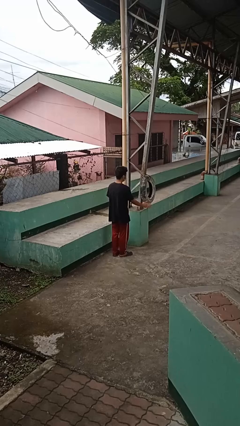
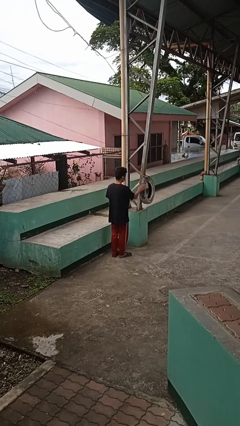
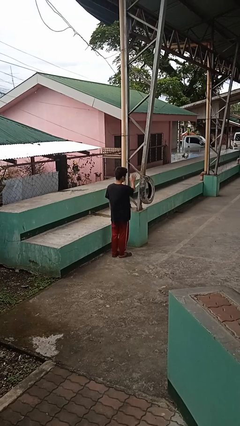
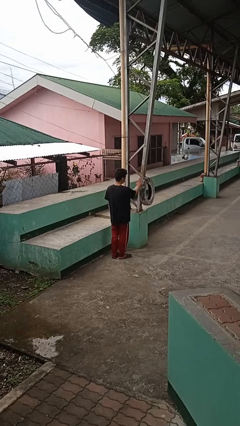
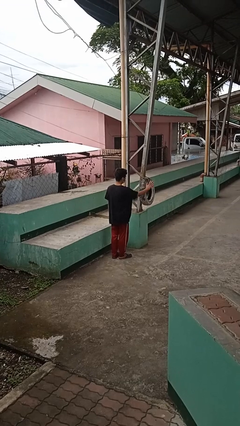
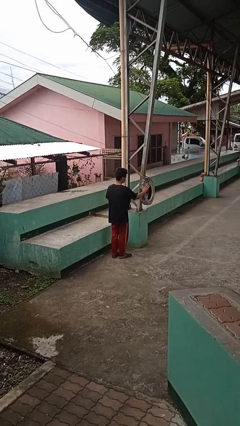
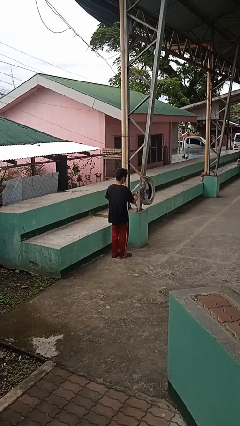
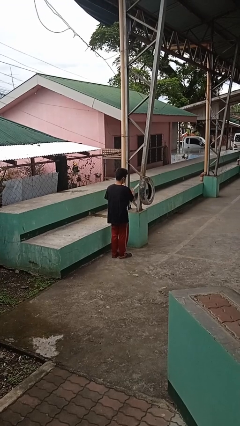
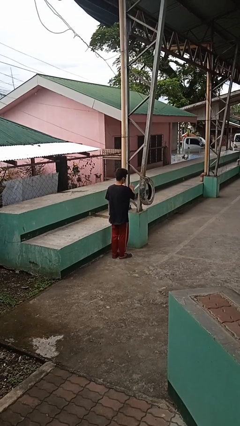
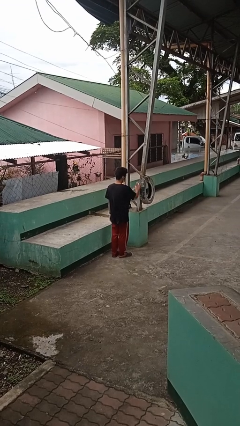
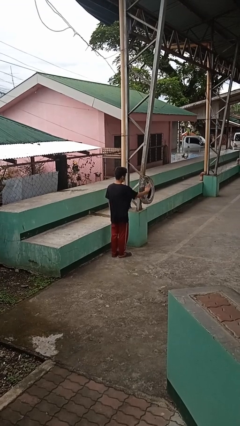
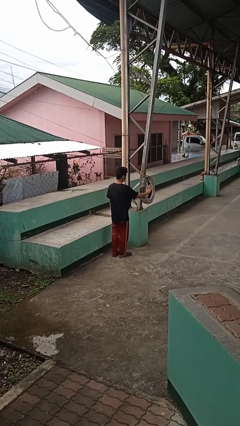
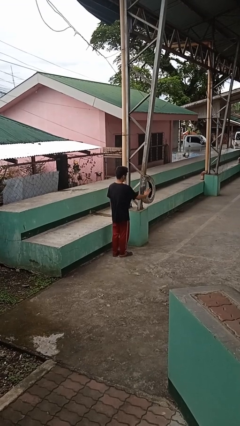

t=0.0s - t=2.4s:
person waves hand over object

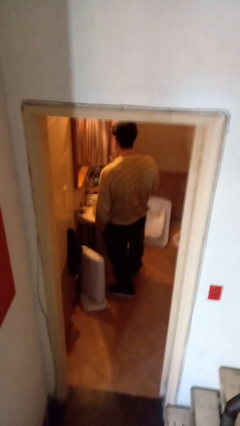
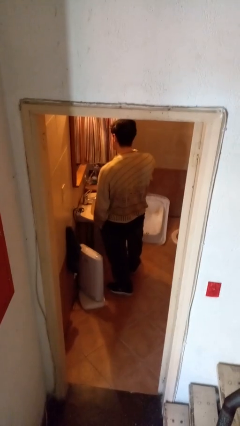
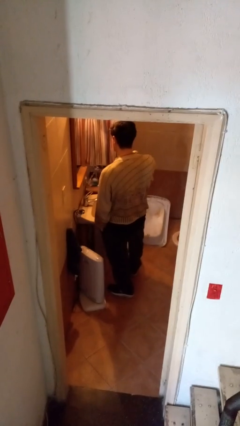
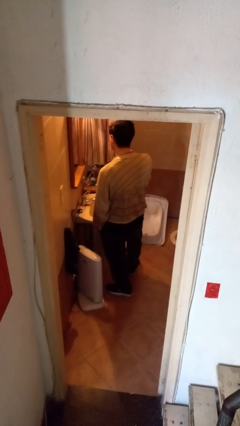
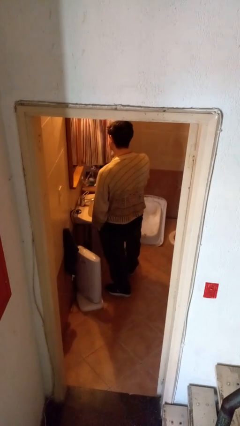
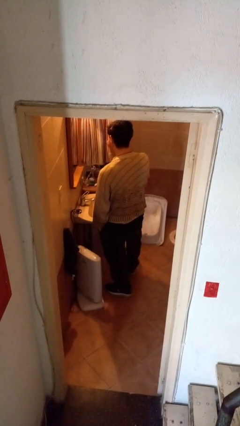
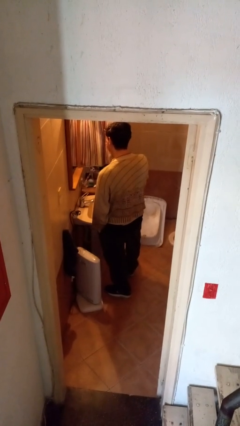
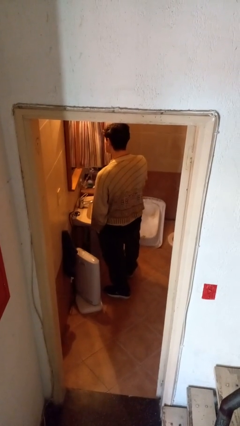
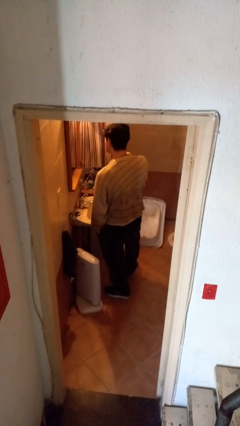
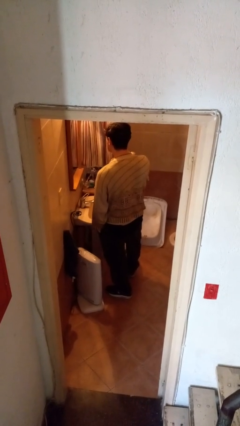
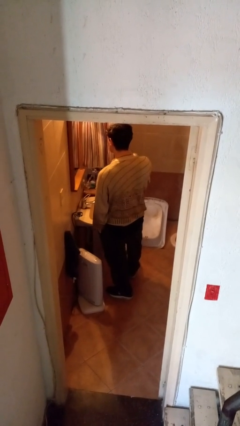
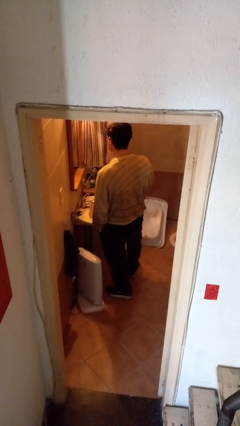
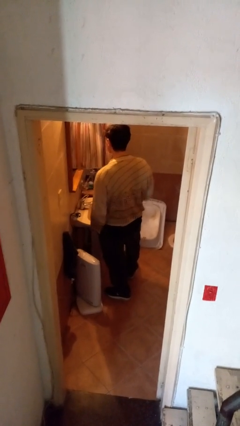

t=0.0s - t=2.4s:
person brushes teeth

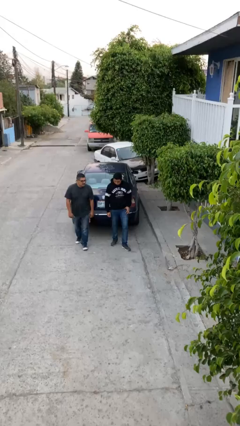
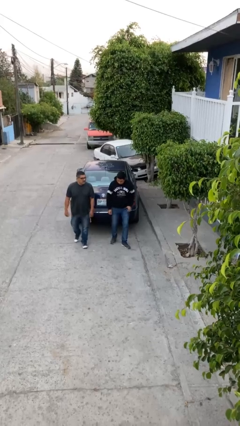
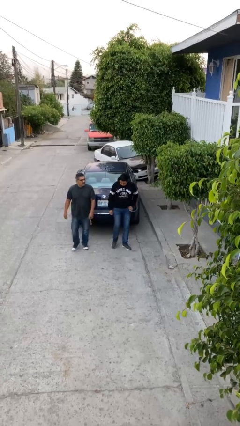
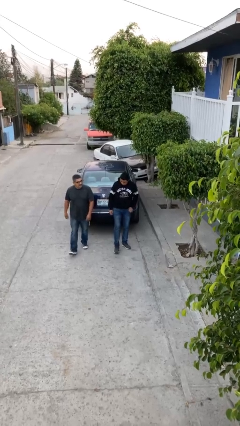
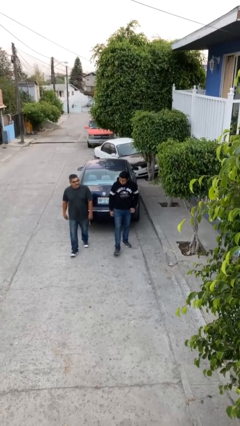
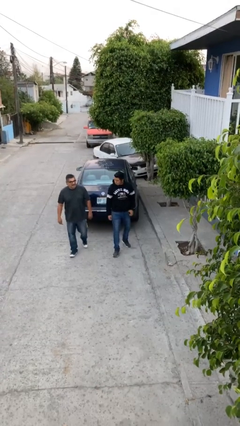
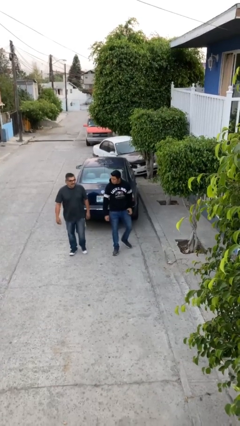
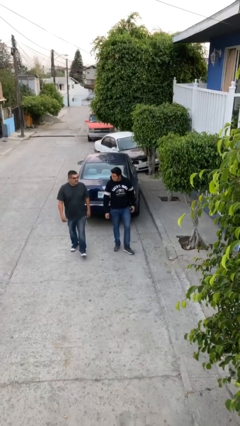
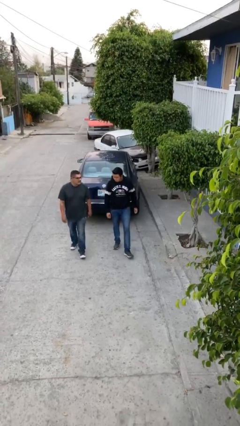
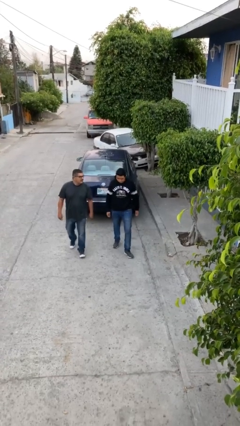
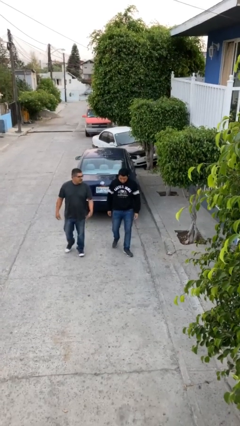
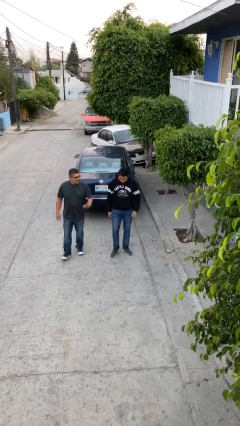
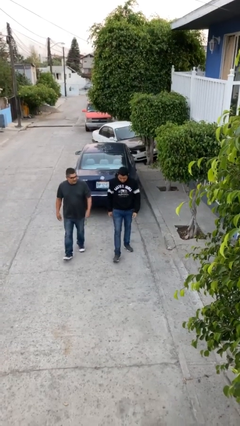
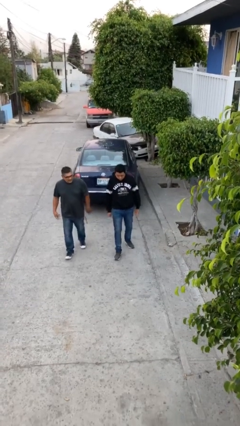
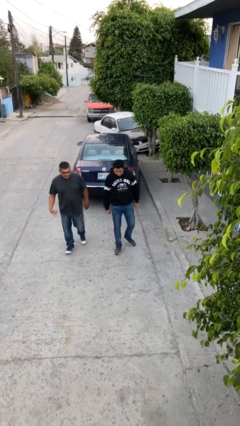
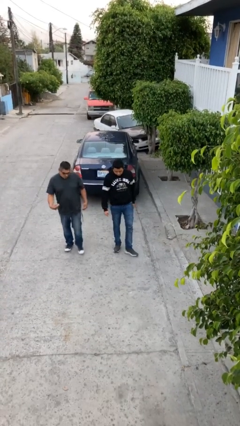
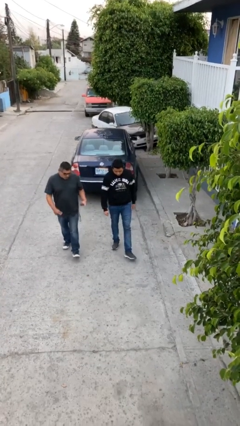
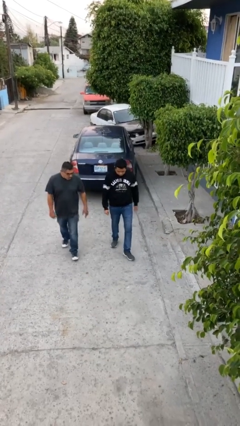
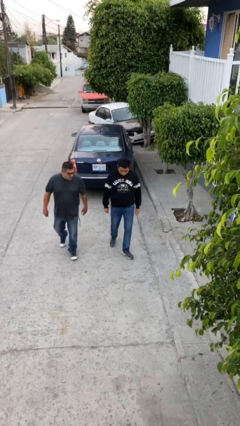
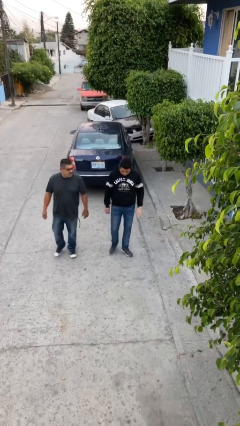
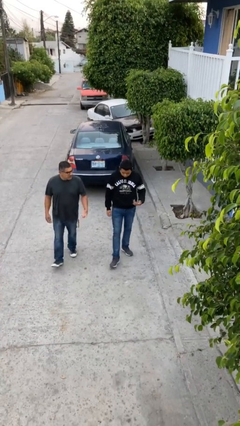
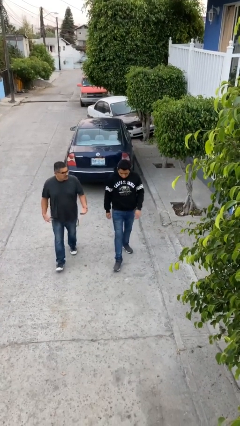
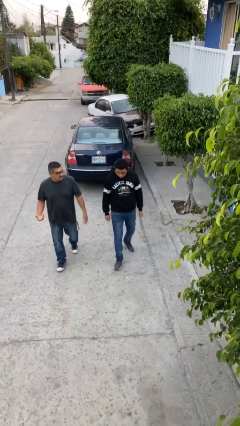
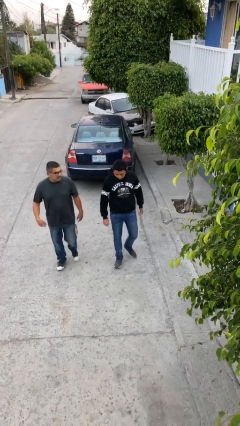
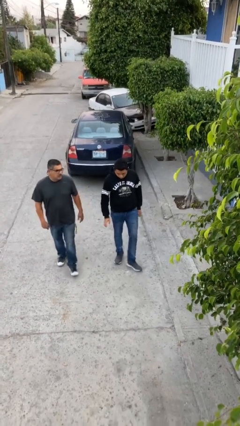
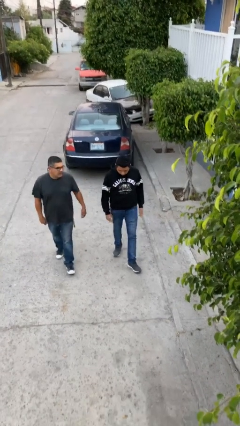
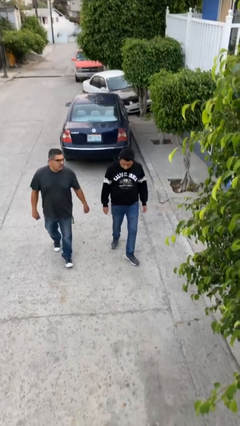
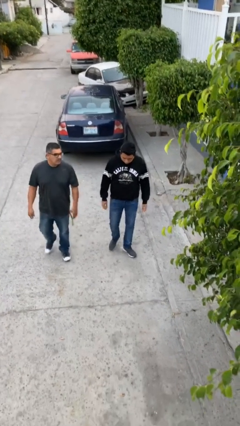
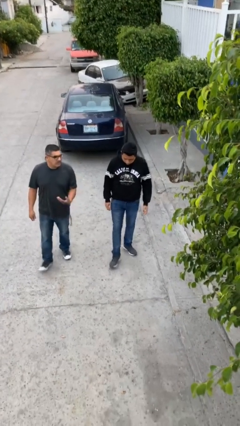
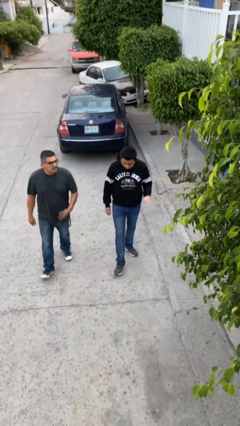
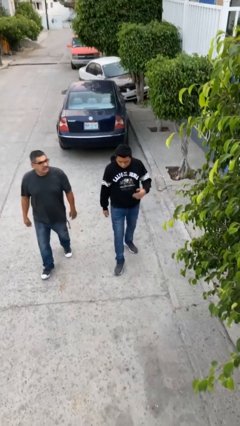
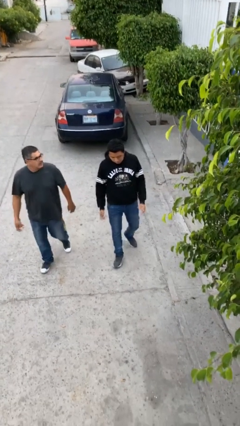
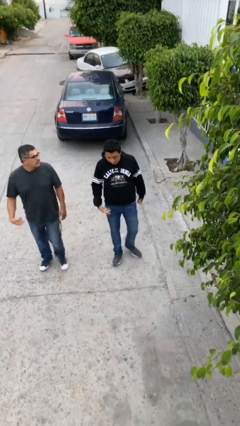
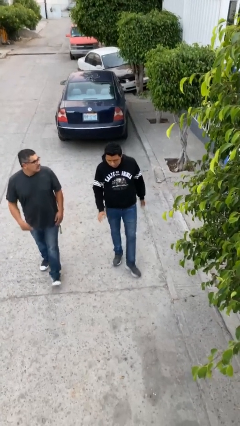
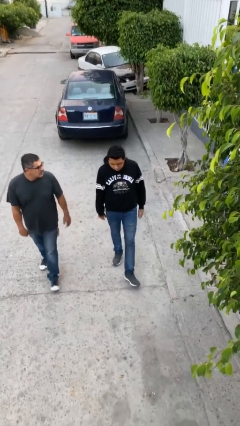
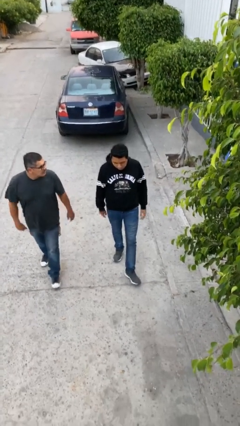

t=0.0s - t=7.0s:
person talks to person

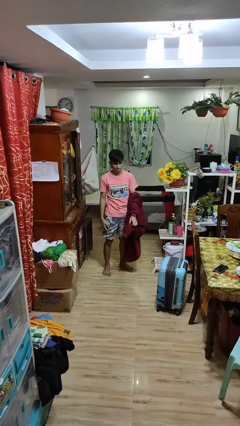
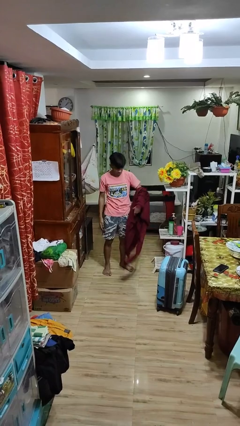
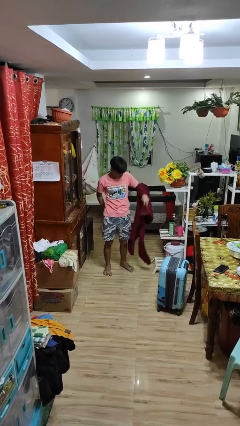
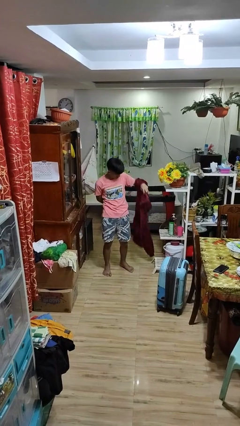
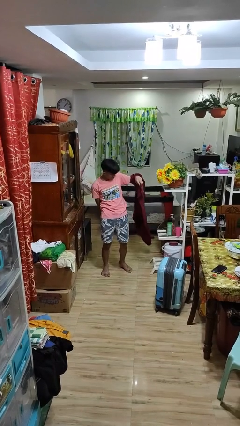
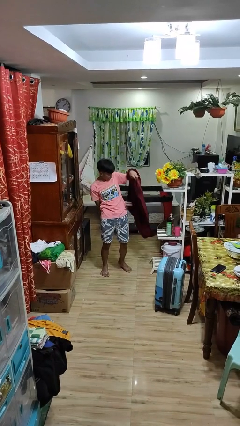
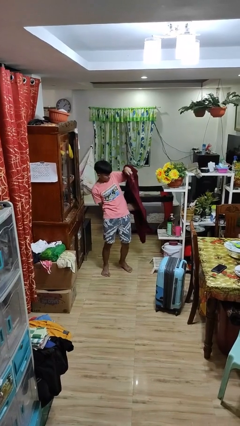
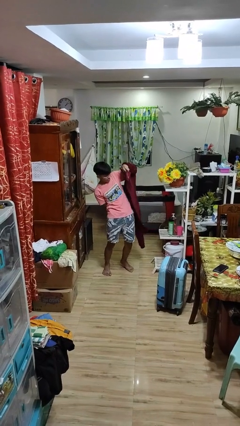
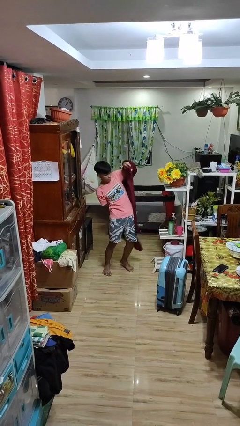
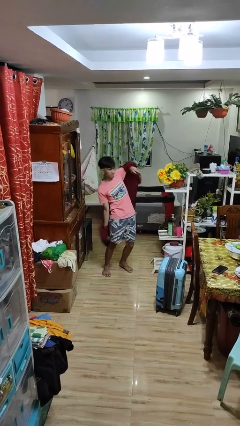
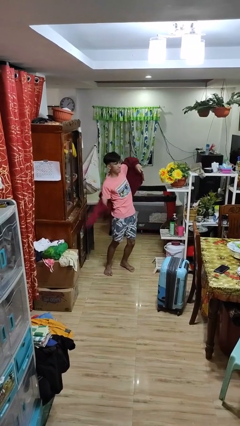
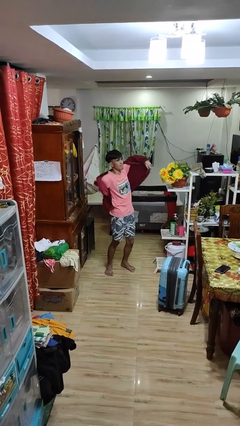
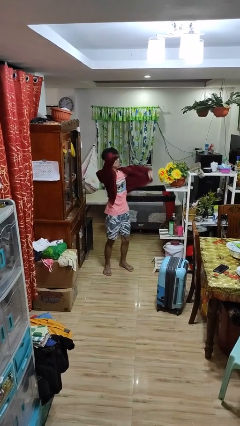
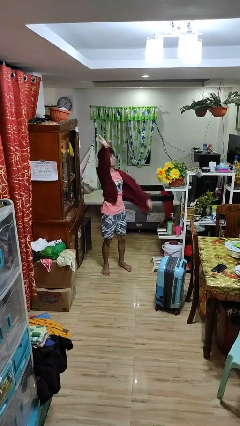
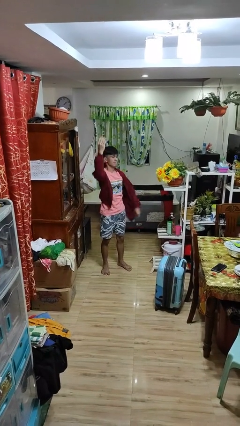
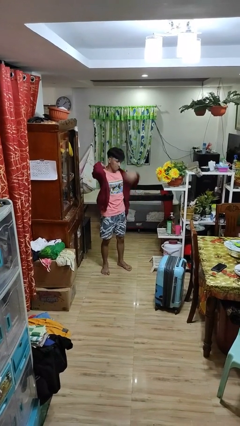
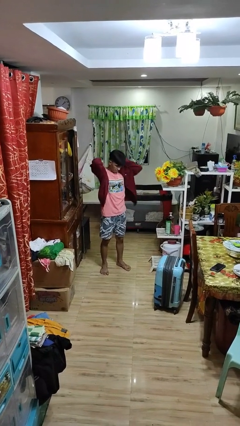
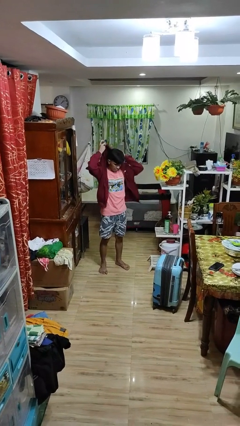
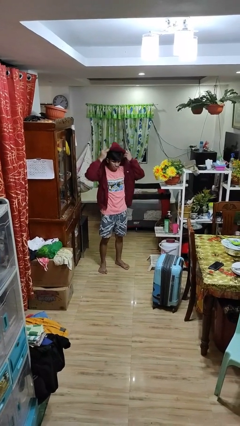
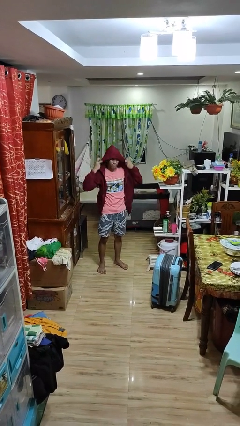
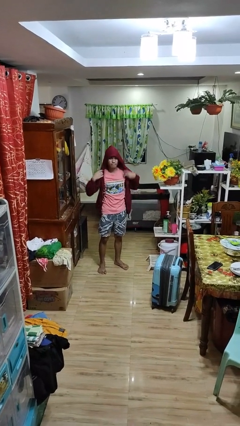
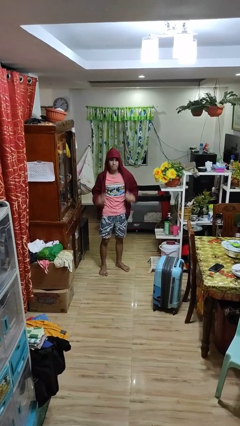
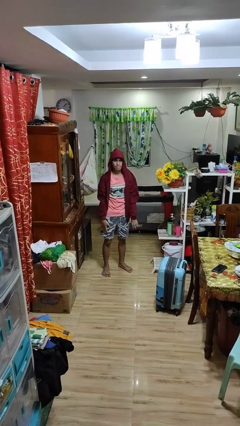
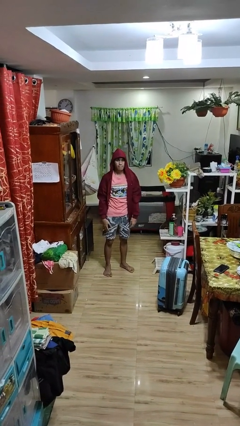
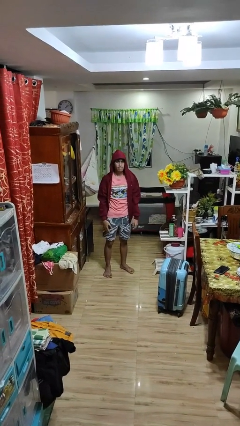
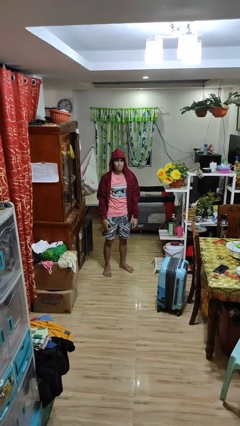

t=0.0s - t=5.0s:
person puts on hoodie

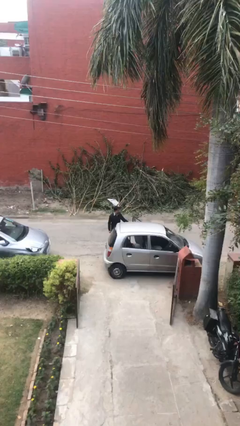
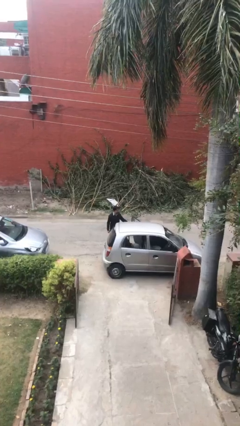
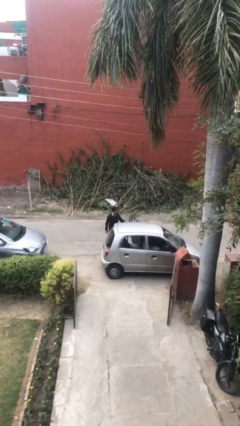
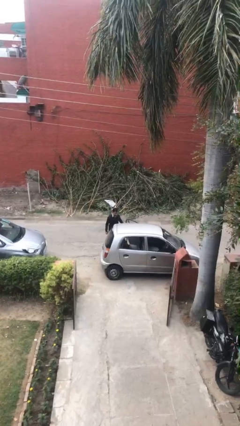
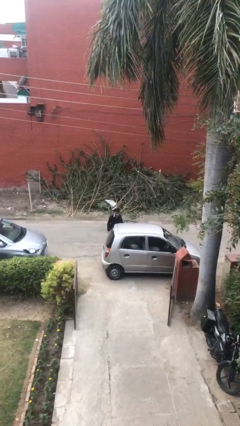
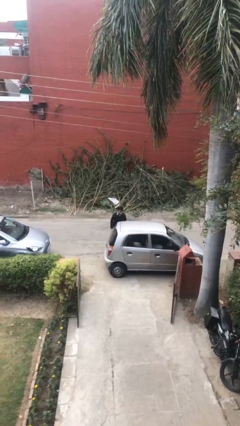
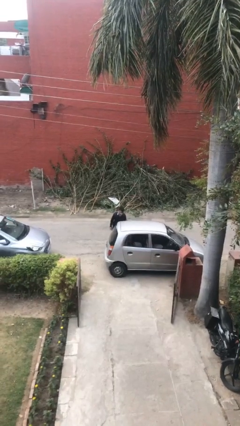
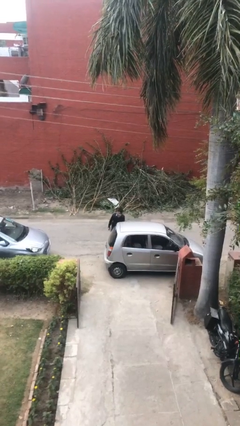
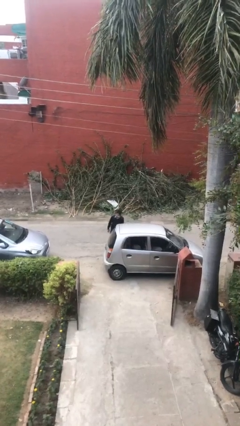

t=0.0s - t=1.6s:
person closes car door
